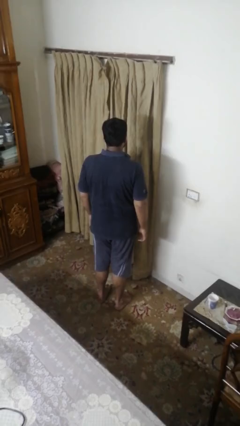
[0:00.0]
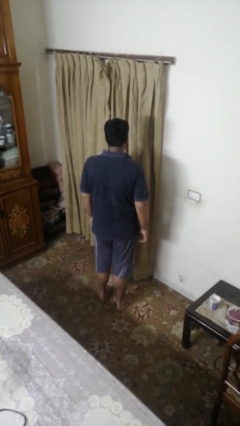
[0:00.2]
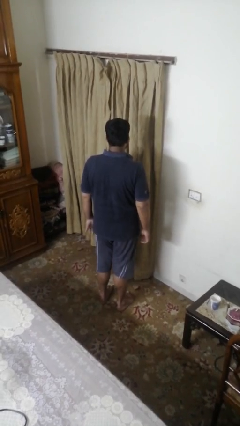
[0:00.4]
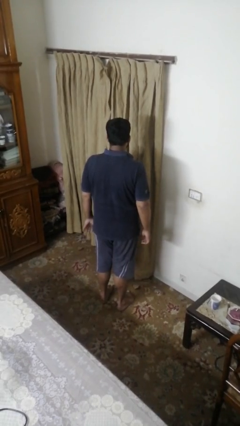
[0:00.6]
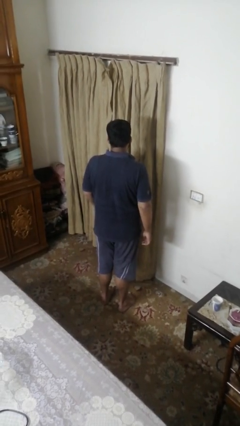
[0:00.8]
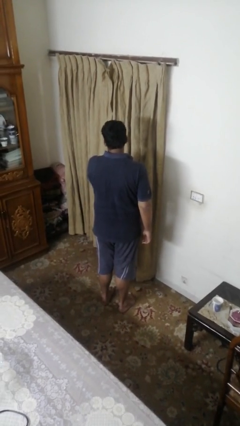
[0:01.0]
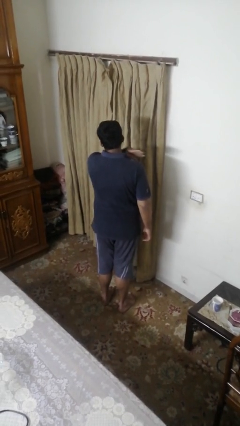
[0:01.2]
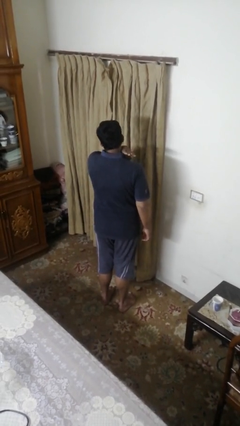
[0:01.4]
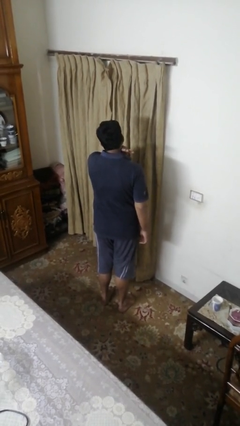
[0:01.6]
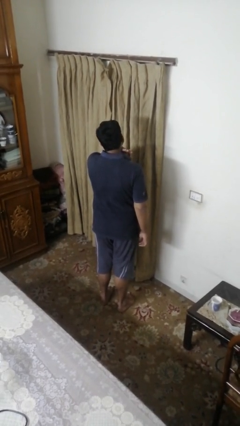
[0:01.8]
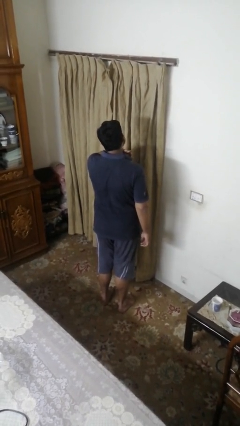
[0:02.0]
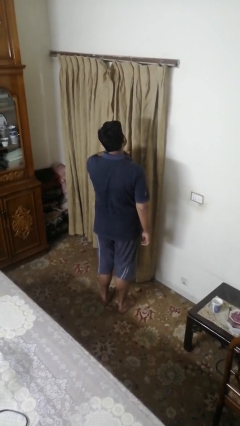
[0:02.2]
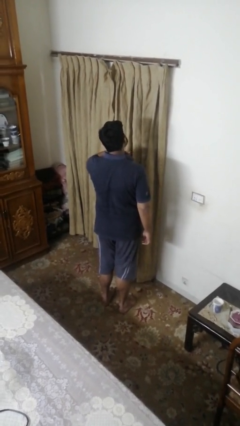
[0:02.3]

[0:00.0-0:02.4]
person gestures cut

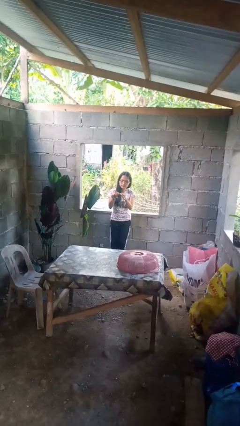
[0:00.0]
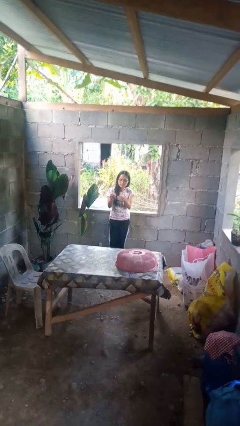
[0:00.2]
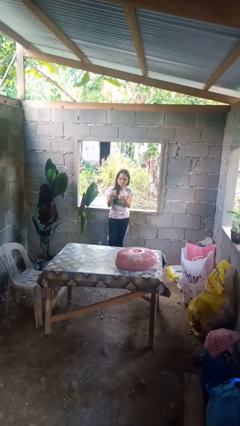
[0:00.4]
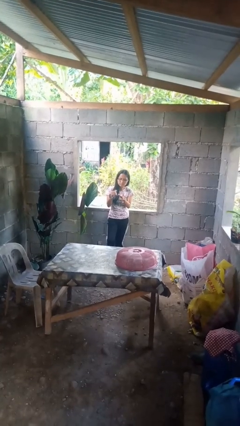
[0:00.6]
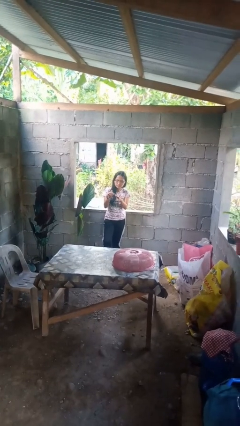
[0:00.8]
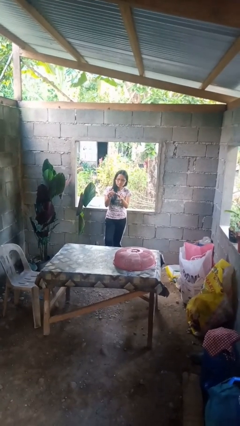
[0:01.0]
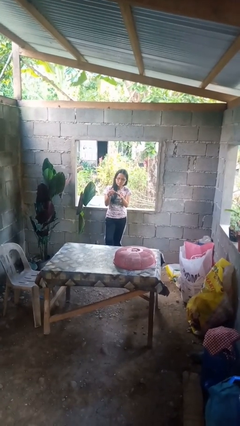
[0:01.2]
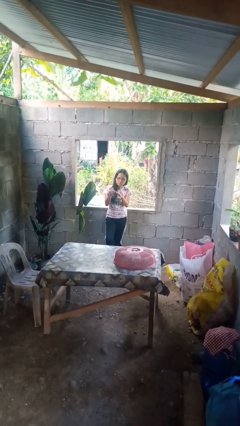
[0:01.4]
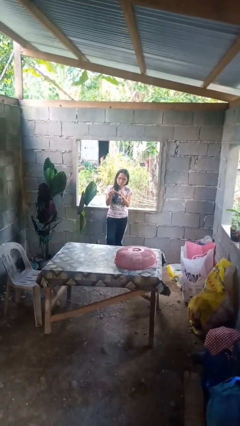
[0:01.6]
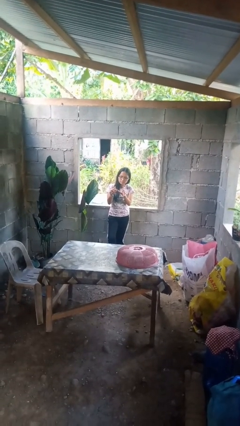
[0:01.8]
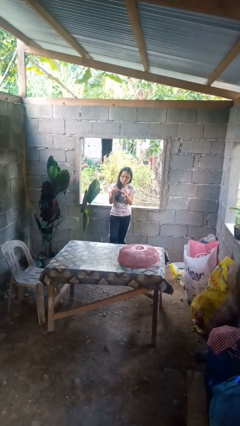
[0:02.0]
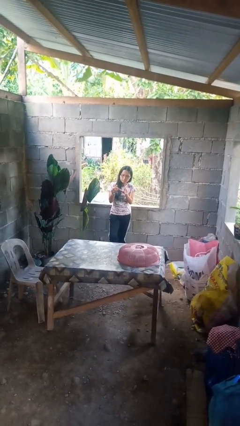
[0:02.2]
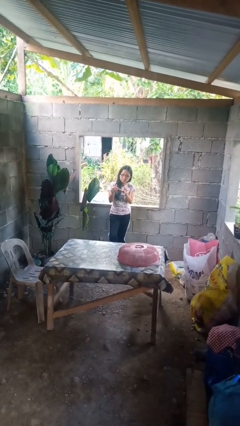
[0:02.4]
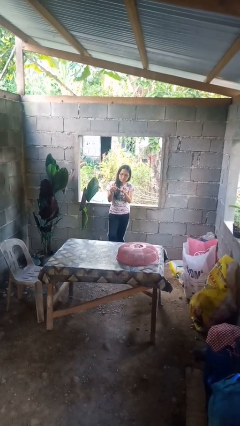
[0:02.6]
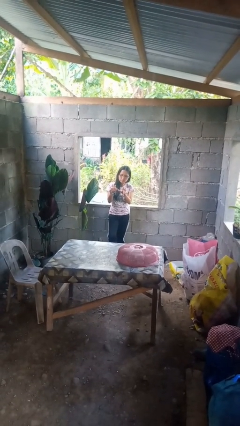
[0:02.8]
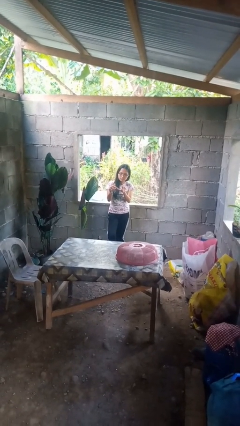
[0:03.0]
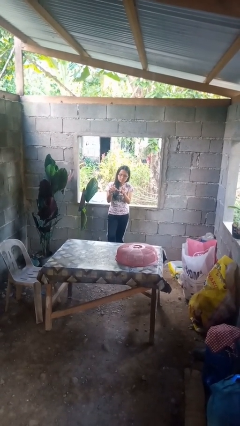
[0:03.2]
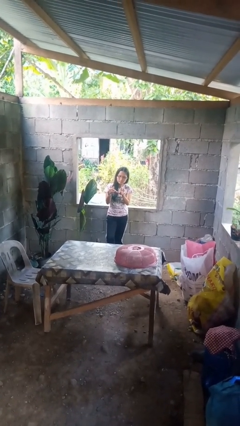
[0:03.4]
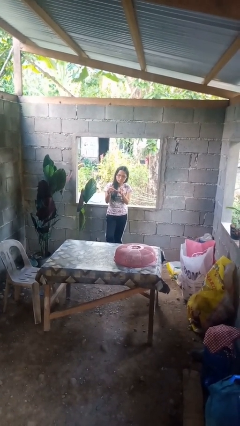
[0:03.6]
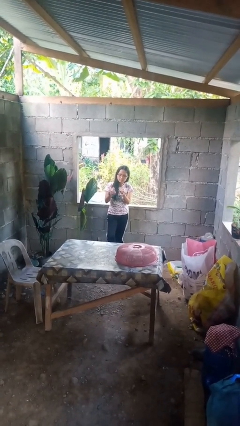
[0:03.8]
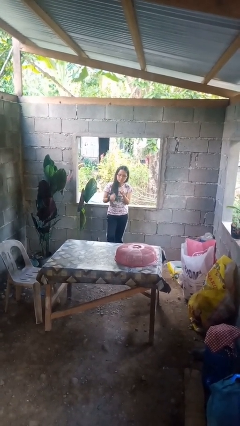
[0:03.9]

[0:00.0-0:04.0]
person clips fingernails

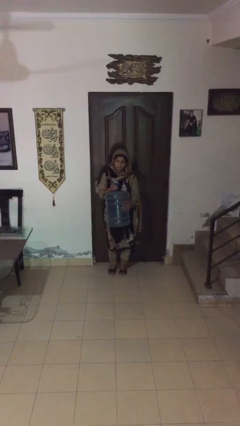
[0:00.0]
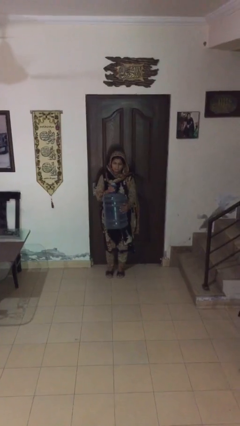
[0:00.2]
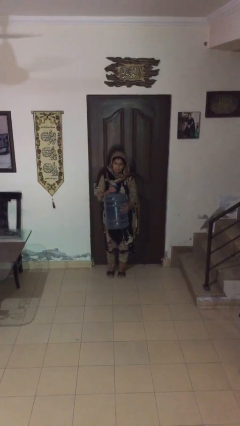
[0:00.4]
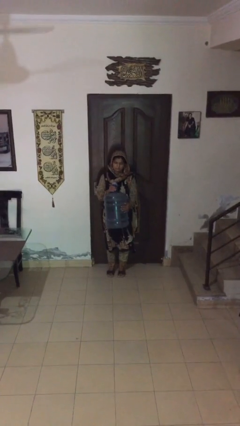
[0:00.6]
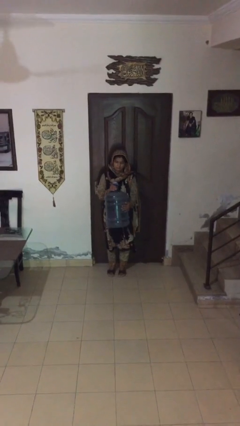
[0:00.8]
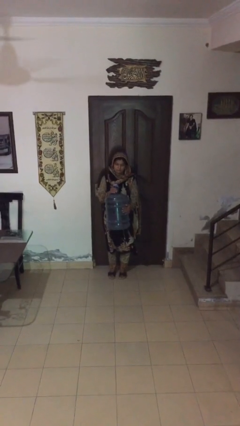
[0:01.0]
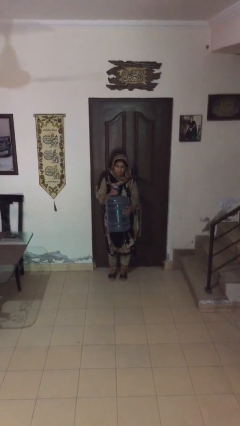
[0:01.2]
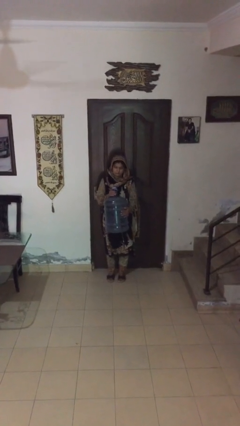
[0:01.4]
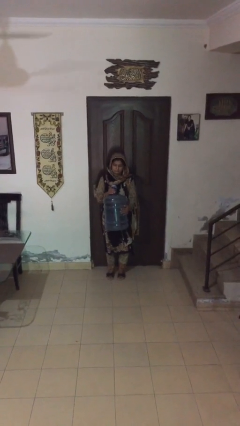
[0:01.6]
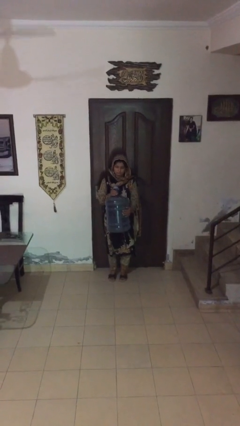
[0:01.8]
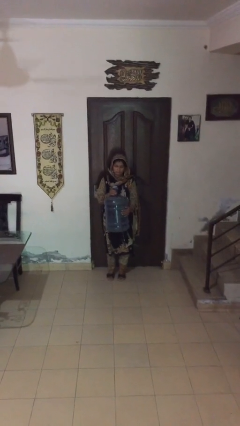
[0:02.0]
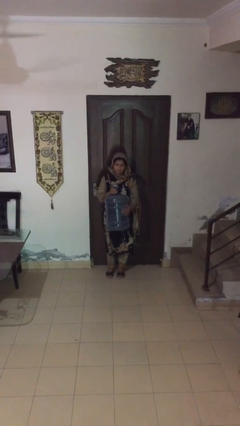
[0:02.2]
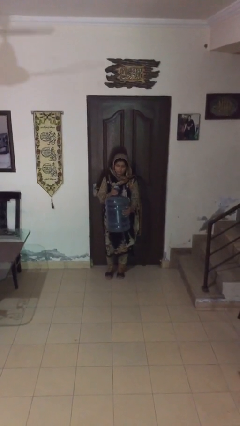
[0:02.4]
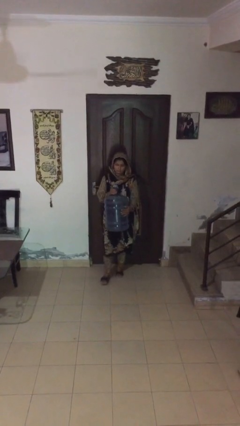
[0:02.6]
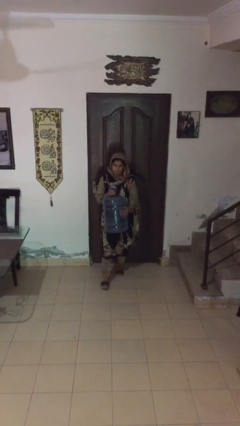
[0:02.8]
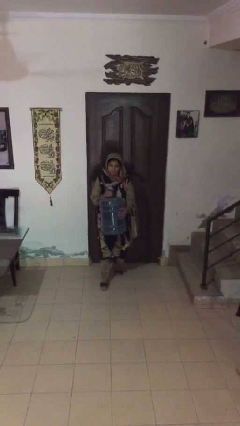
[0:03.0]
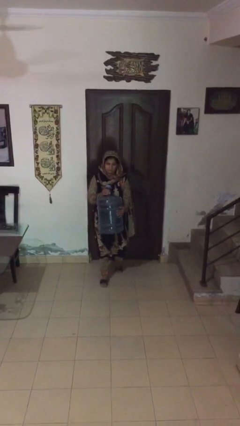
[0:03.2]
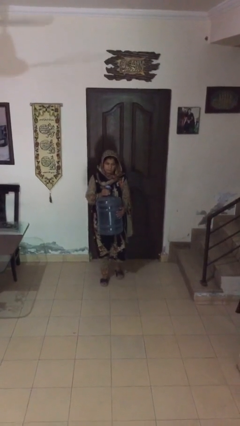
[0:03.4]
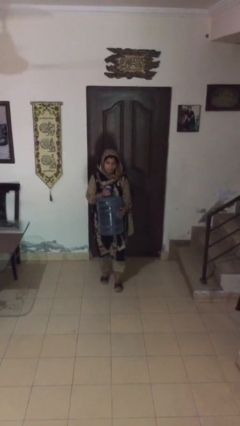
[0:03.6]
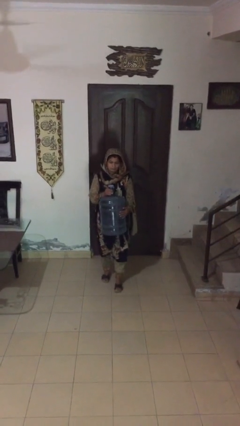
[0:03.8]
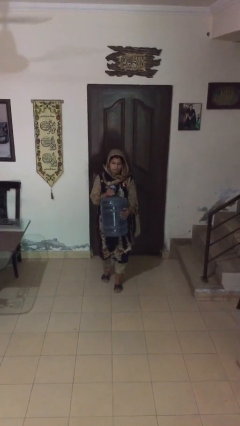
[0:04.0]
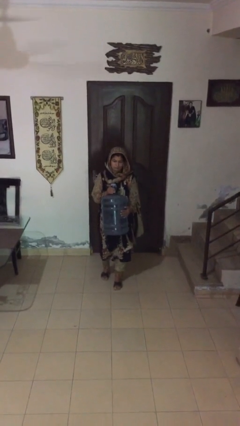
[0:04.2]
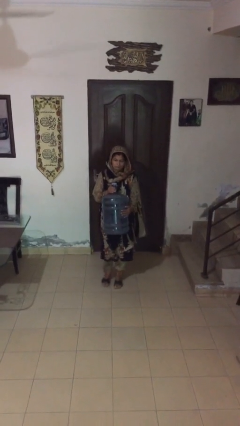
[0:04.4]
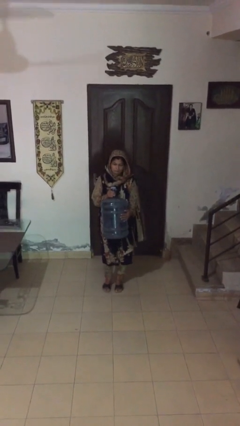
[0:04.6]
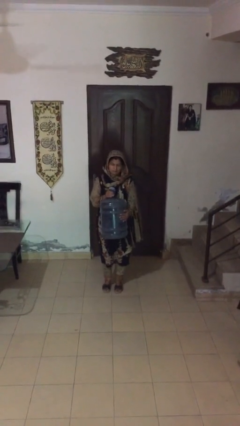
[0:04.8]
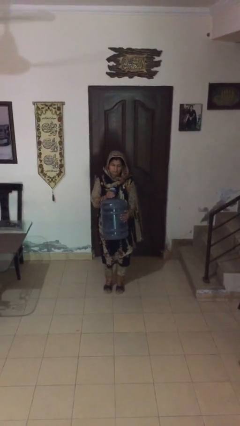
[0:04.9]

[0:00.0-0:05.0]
person carries heavy object

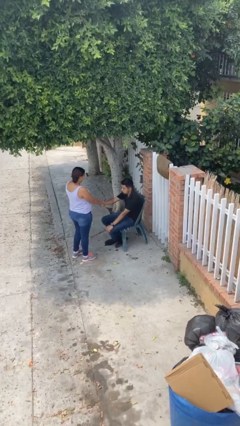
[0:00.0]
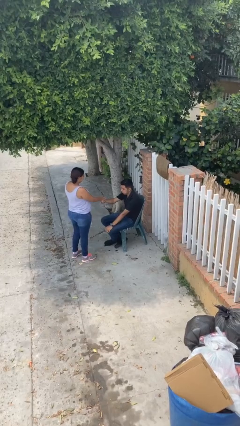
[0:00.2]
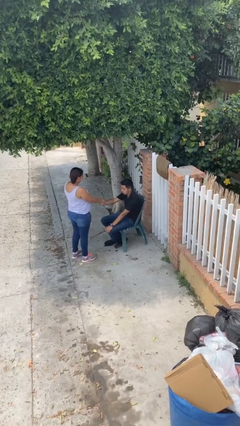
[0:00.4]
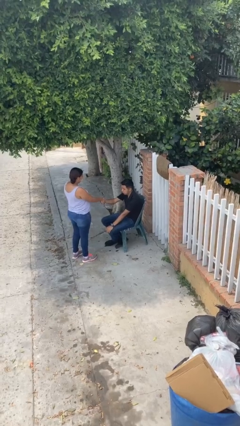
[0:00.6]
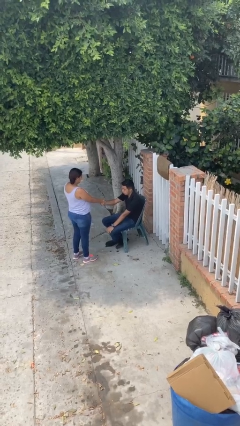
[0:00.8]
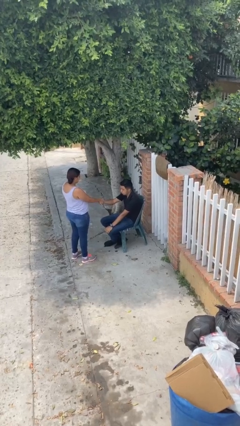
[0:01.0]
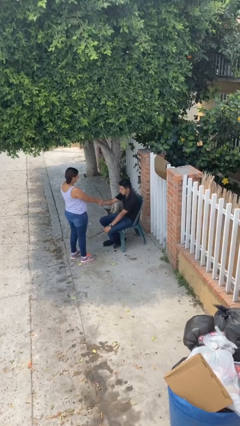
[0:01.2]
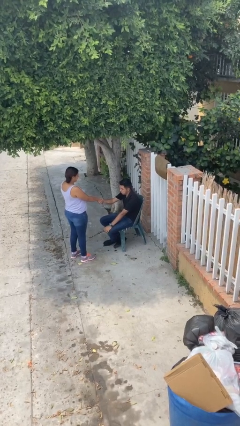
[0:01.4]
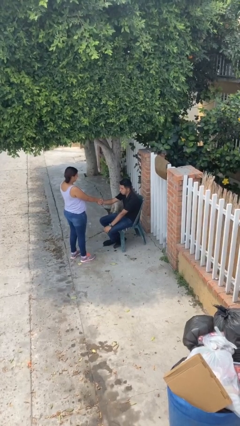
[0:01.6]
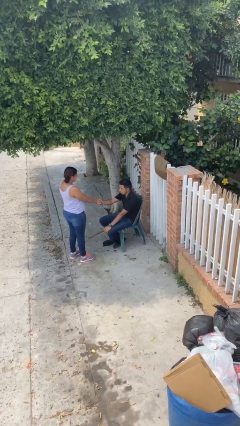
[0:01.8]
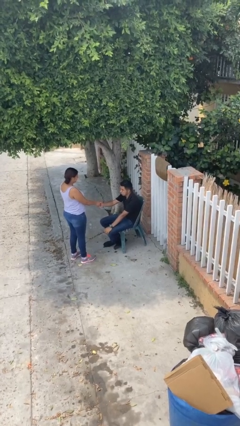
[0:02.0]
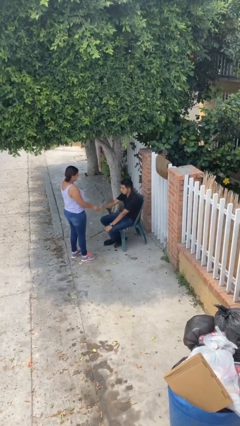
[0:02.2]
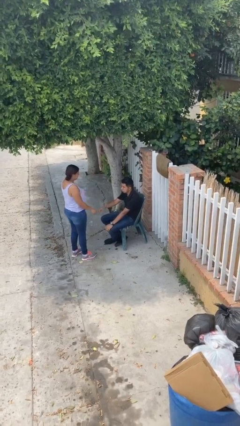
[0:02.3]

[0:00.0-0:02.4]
person shakes hand

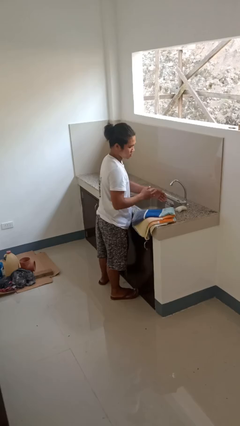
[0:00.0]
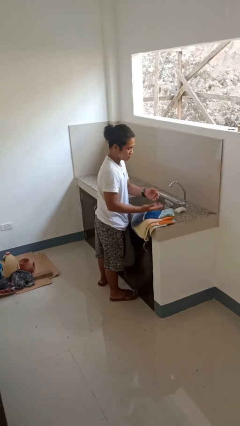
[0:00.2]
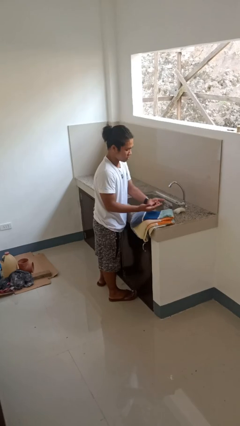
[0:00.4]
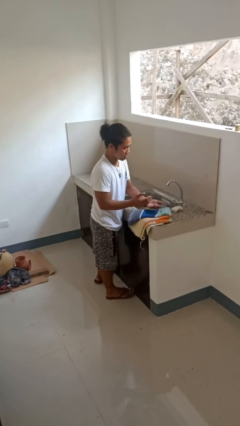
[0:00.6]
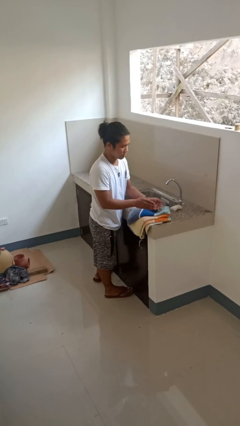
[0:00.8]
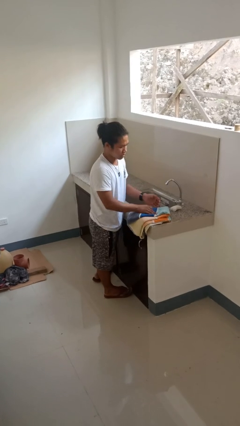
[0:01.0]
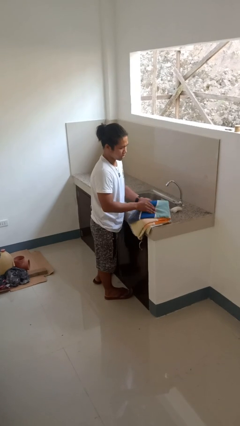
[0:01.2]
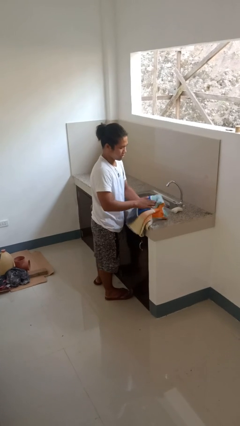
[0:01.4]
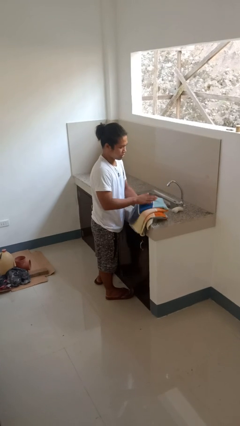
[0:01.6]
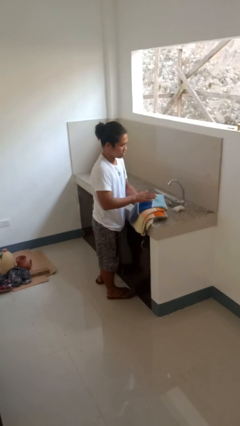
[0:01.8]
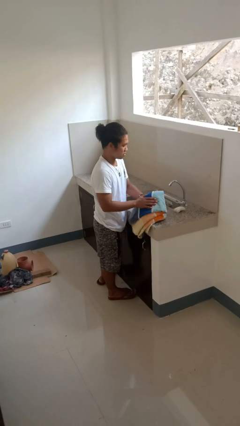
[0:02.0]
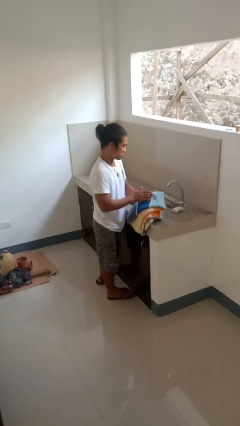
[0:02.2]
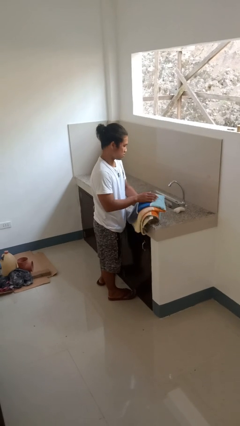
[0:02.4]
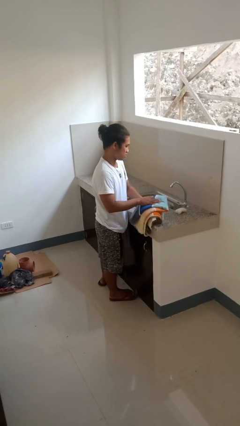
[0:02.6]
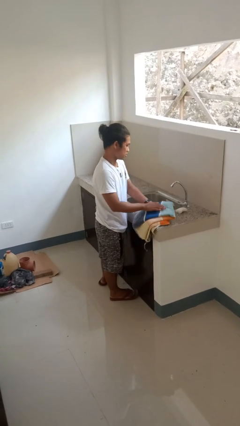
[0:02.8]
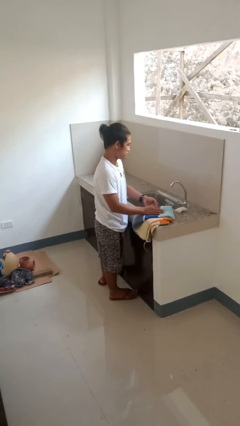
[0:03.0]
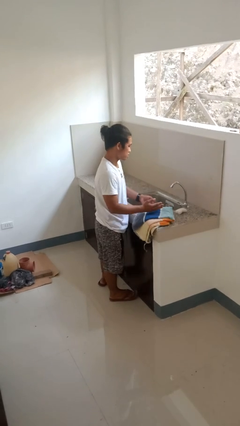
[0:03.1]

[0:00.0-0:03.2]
person dries hands with towel

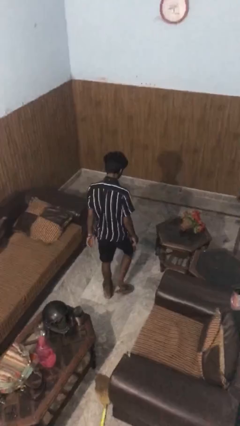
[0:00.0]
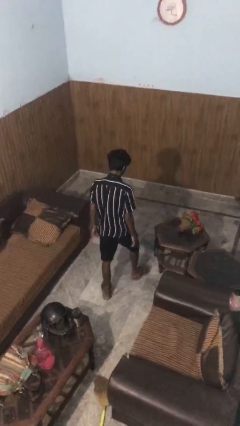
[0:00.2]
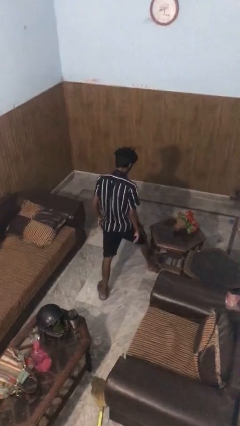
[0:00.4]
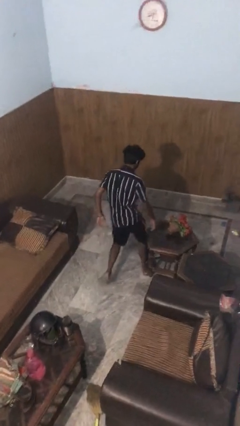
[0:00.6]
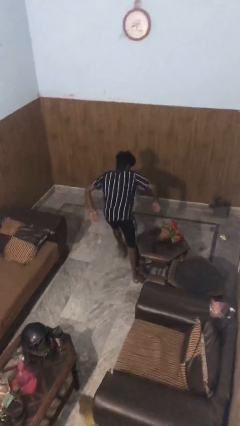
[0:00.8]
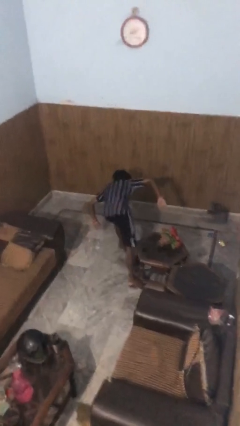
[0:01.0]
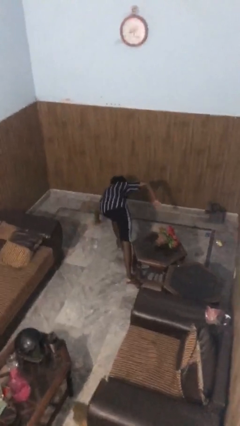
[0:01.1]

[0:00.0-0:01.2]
person trips on object on floor
